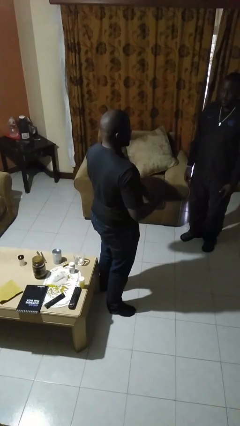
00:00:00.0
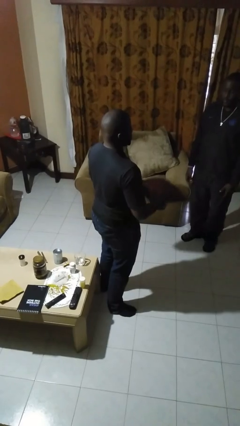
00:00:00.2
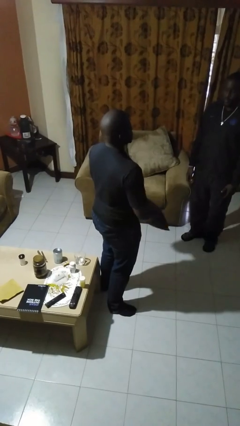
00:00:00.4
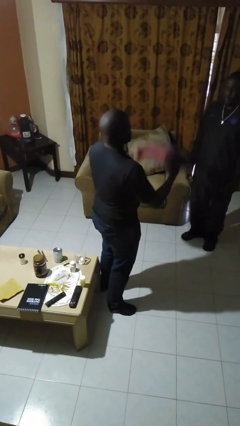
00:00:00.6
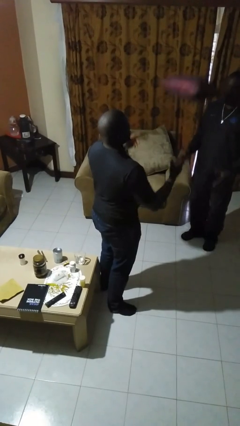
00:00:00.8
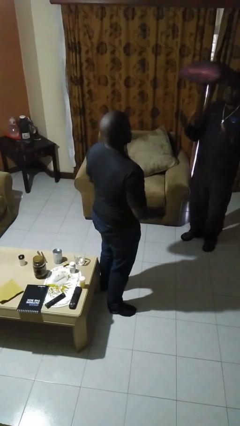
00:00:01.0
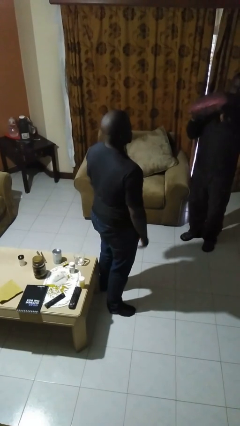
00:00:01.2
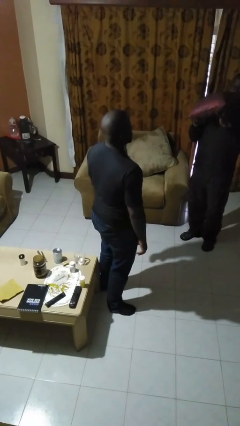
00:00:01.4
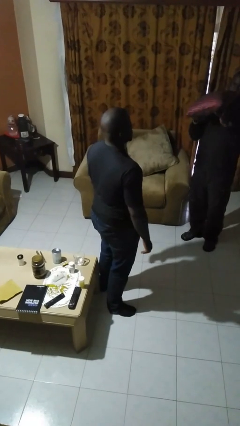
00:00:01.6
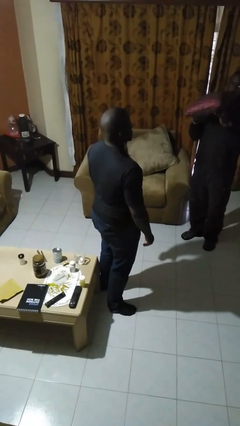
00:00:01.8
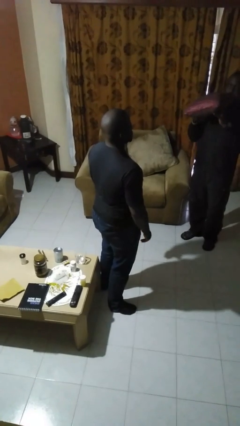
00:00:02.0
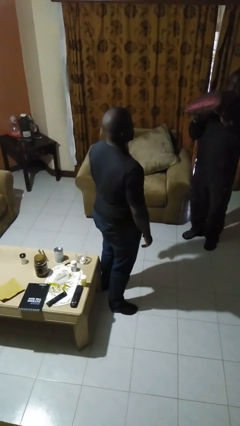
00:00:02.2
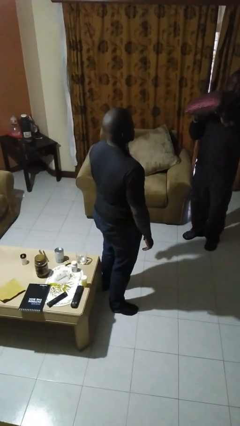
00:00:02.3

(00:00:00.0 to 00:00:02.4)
person throws object to person

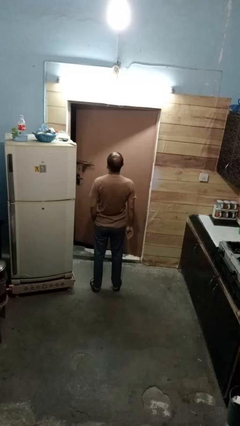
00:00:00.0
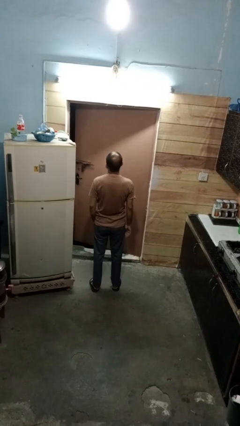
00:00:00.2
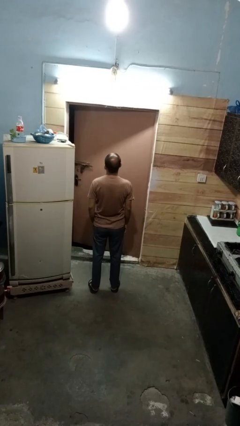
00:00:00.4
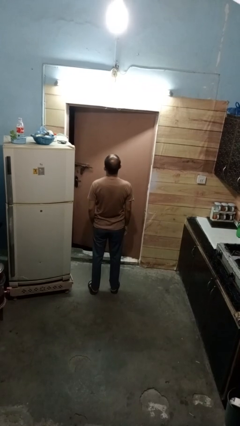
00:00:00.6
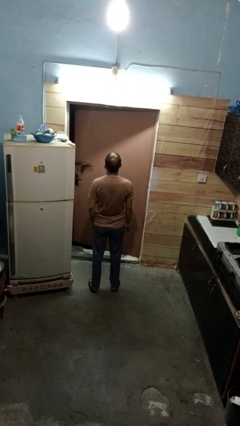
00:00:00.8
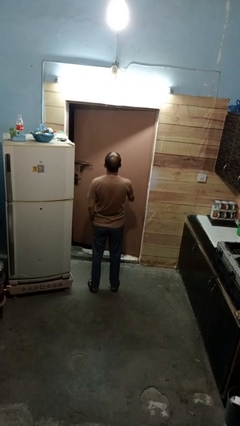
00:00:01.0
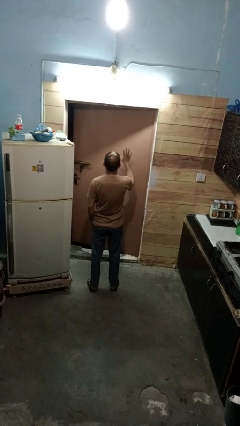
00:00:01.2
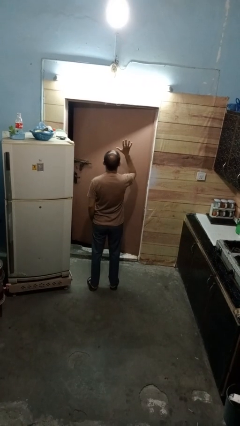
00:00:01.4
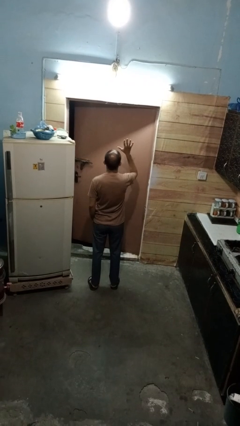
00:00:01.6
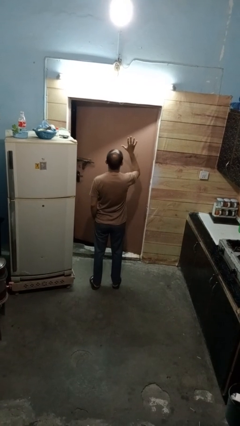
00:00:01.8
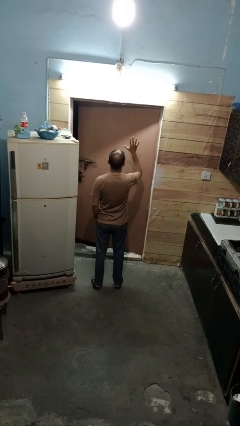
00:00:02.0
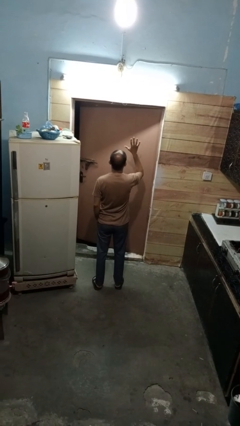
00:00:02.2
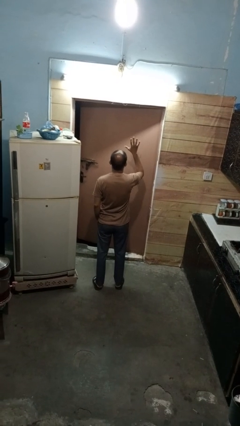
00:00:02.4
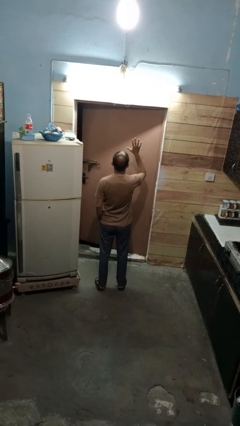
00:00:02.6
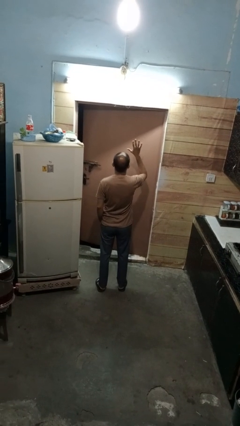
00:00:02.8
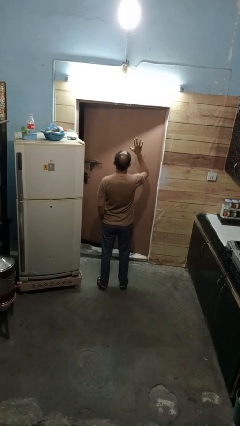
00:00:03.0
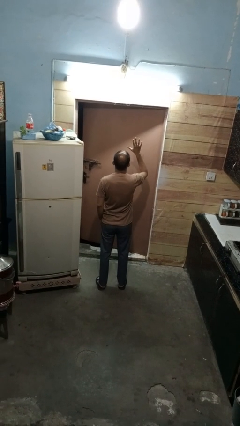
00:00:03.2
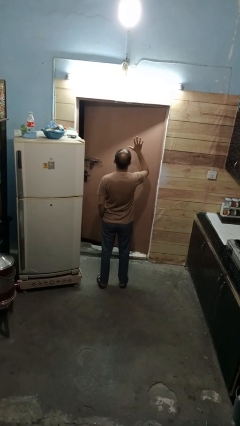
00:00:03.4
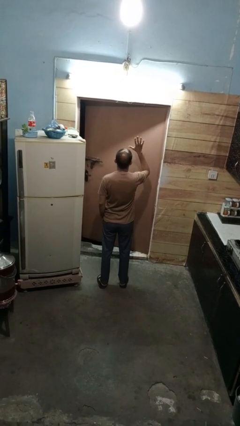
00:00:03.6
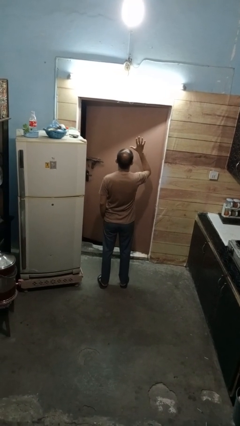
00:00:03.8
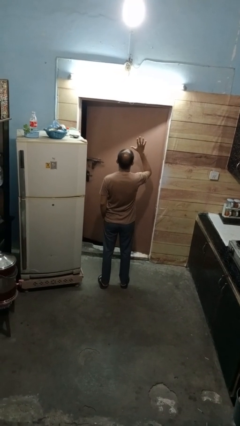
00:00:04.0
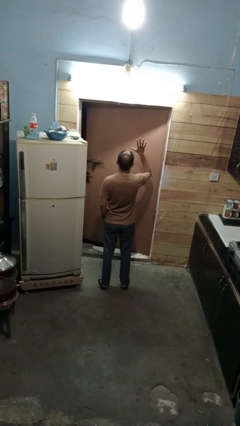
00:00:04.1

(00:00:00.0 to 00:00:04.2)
person gestures number five

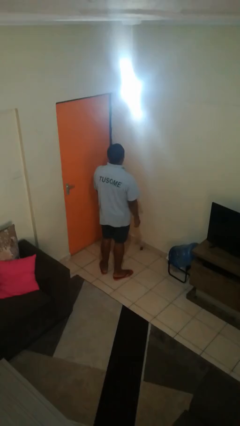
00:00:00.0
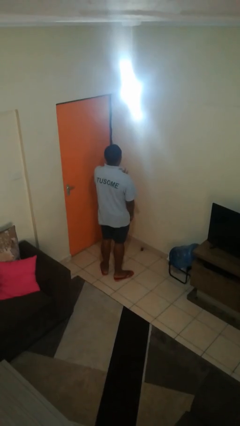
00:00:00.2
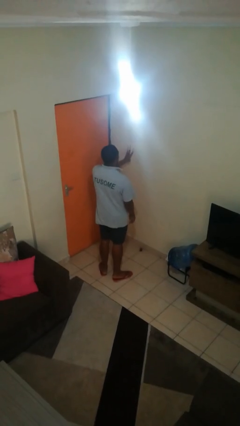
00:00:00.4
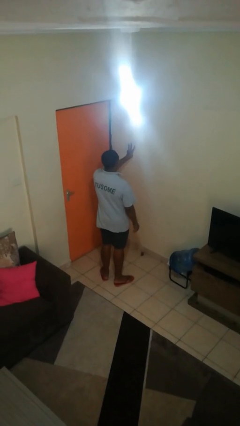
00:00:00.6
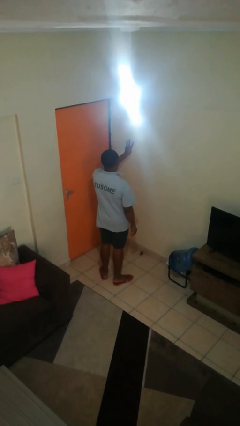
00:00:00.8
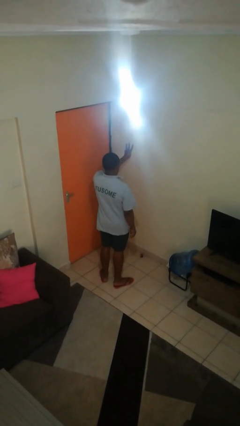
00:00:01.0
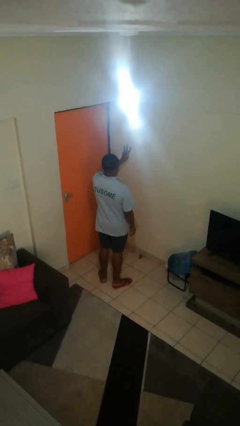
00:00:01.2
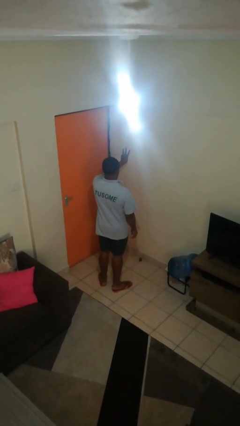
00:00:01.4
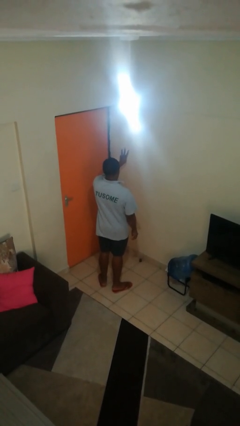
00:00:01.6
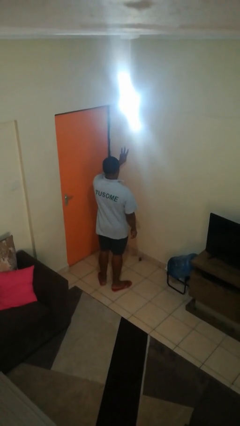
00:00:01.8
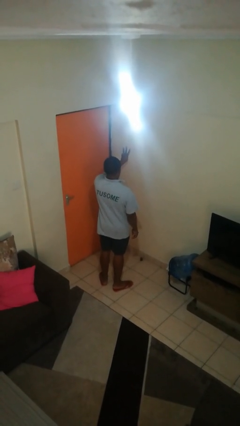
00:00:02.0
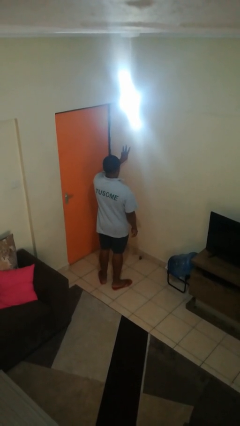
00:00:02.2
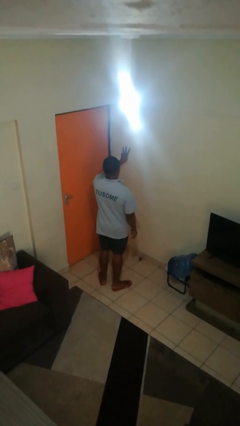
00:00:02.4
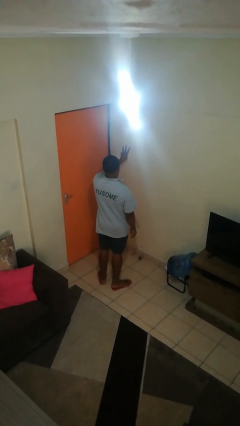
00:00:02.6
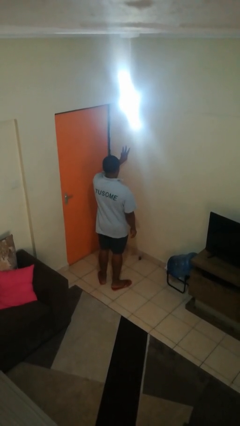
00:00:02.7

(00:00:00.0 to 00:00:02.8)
person gestures number three

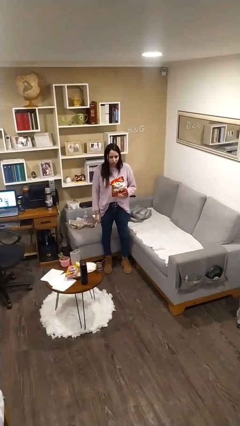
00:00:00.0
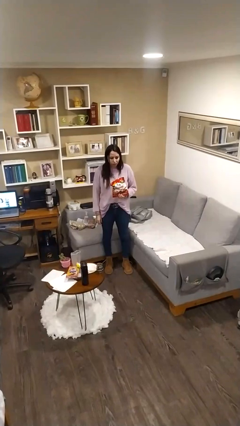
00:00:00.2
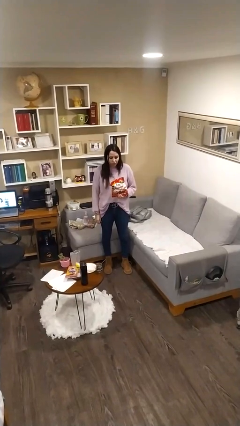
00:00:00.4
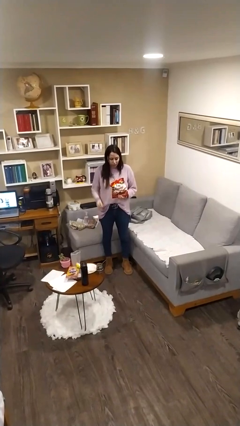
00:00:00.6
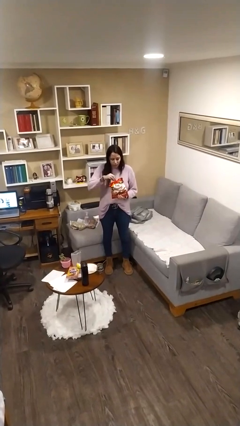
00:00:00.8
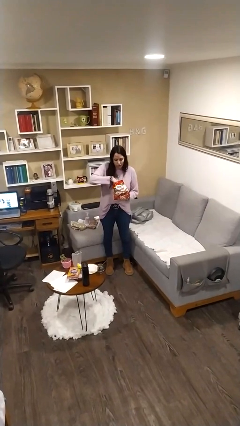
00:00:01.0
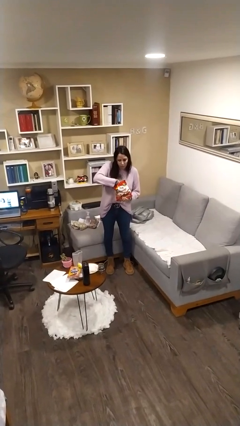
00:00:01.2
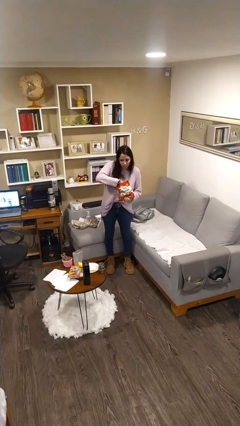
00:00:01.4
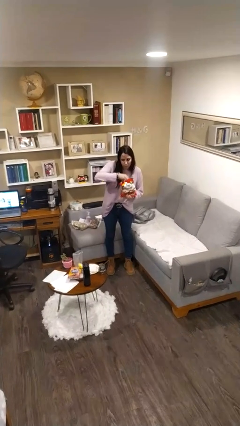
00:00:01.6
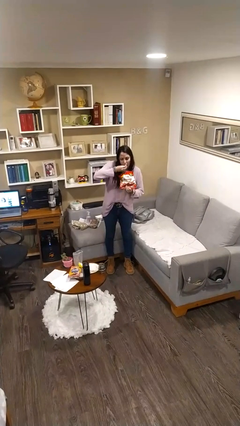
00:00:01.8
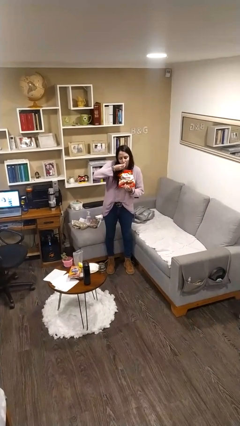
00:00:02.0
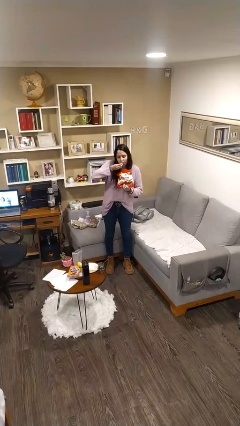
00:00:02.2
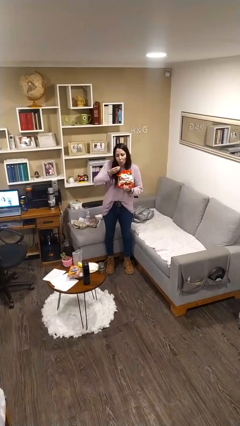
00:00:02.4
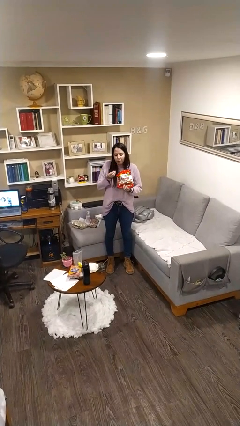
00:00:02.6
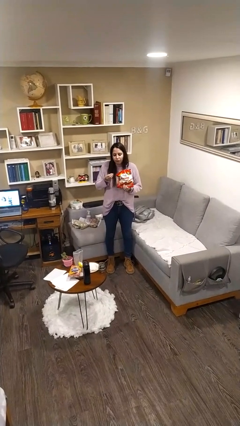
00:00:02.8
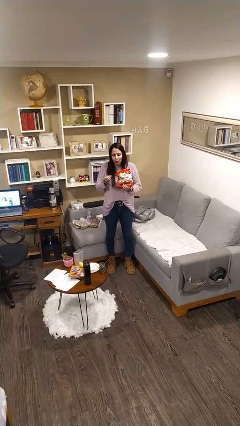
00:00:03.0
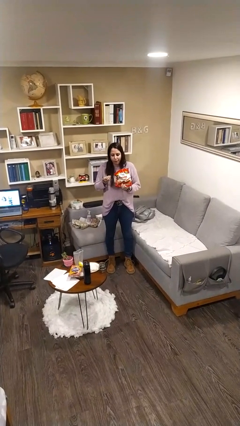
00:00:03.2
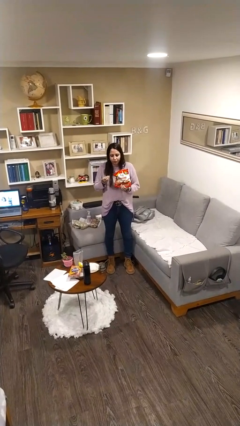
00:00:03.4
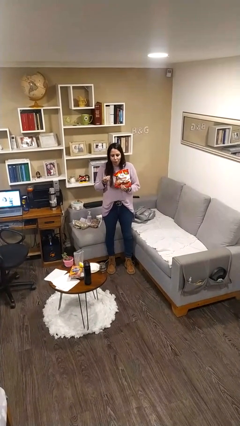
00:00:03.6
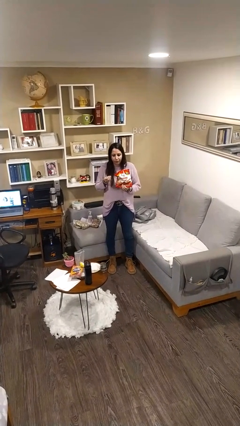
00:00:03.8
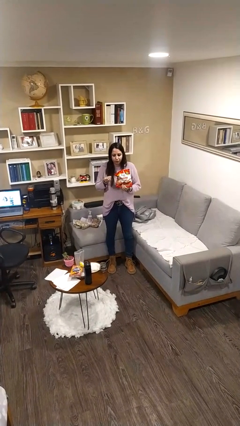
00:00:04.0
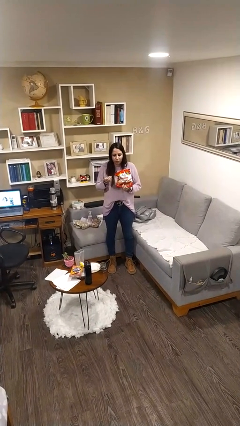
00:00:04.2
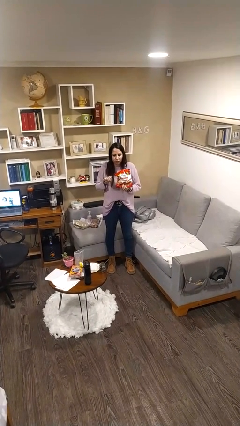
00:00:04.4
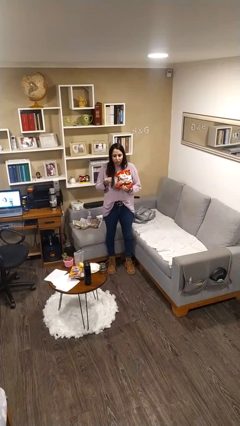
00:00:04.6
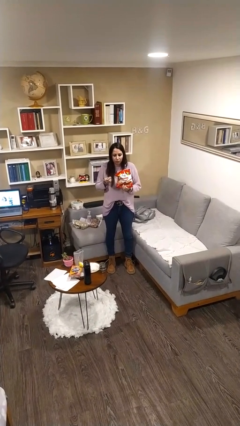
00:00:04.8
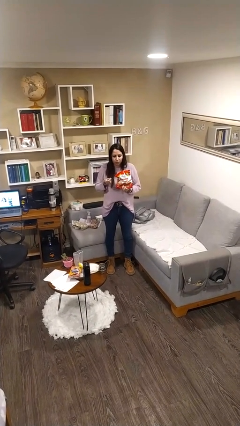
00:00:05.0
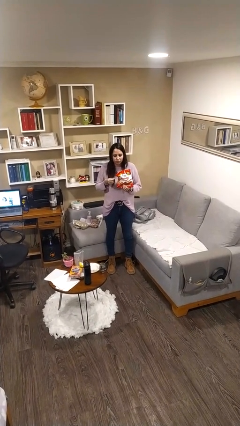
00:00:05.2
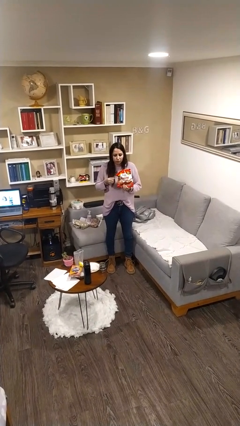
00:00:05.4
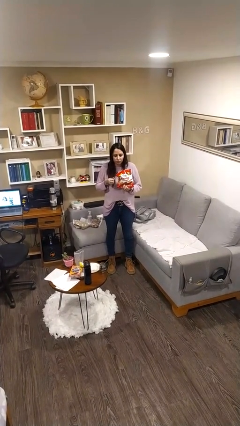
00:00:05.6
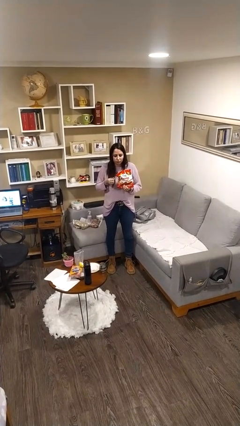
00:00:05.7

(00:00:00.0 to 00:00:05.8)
person eats snack from bag

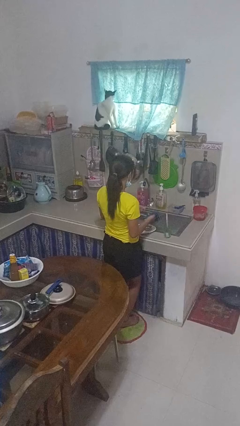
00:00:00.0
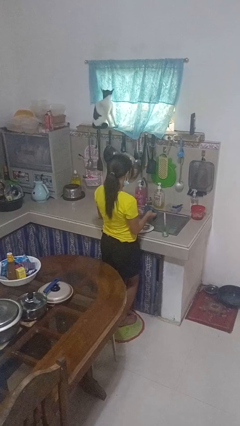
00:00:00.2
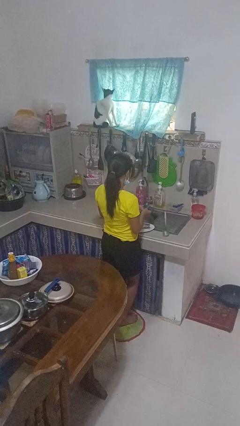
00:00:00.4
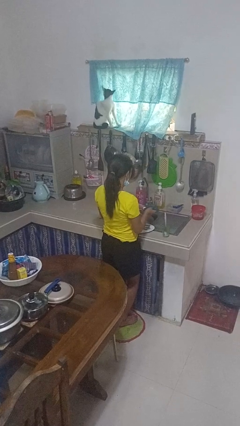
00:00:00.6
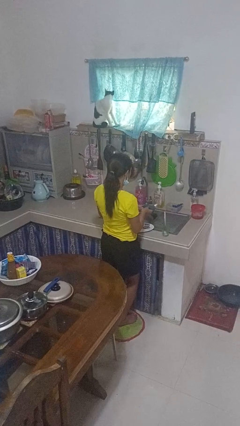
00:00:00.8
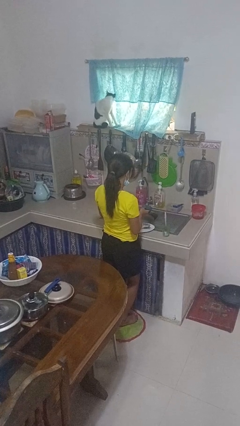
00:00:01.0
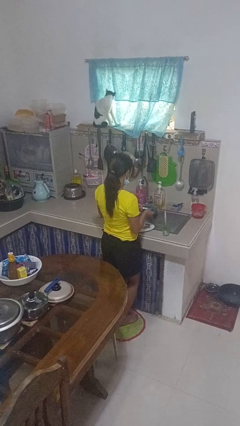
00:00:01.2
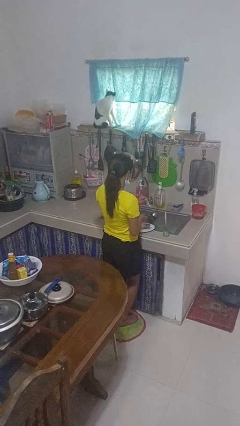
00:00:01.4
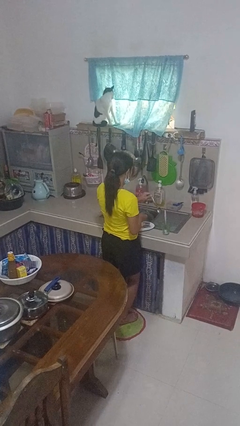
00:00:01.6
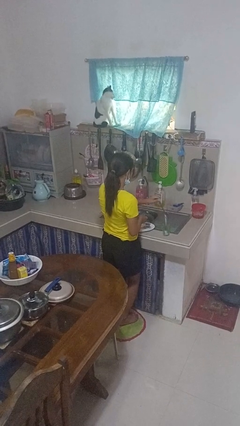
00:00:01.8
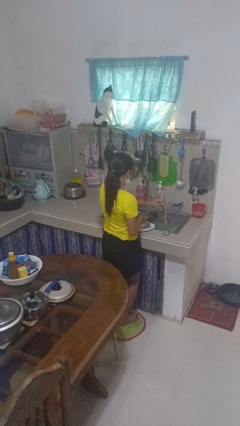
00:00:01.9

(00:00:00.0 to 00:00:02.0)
person dries dish

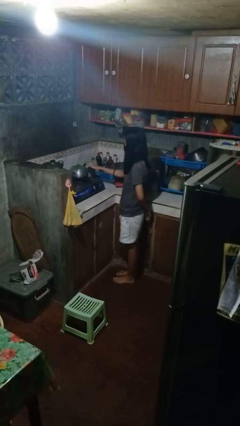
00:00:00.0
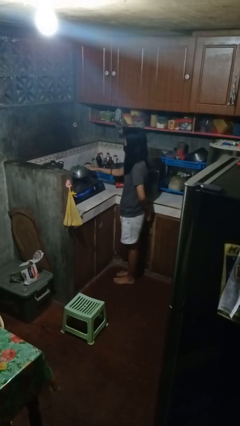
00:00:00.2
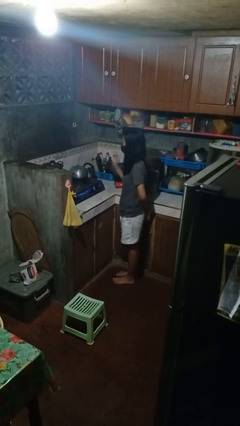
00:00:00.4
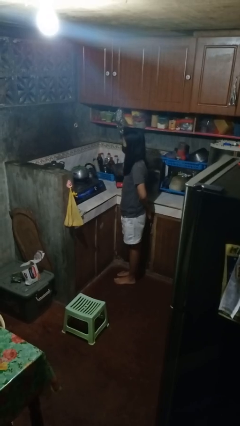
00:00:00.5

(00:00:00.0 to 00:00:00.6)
person burns hand
